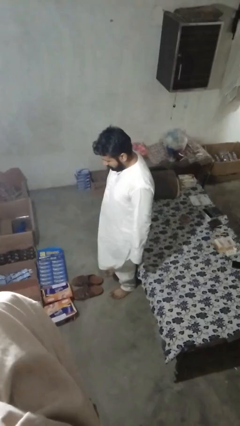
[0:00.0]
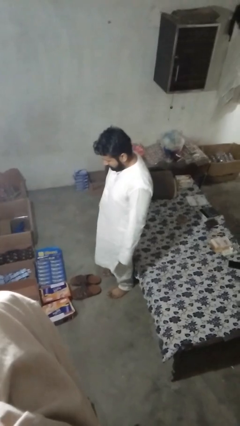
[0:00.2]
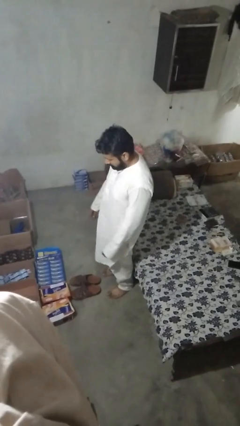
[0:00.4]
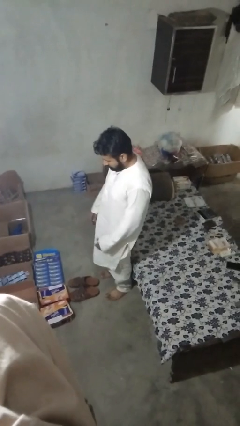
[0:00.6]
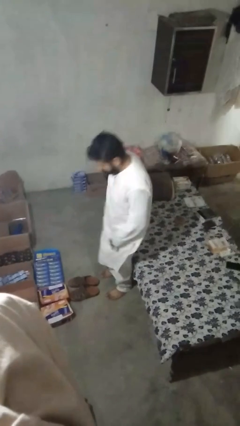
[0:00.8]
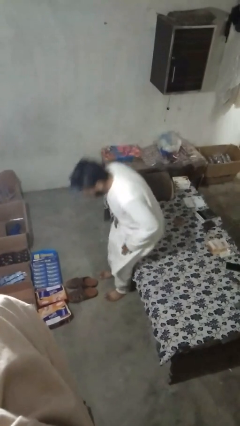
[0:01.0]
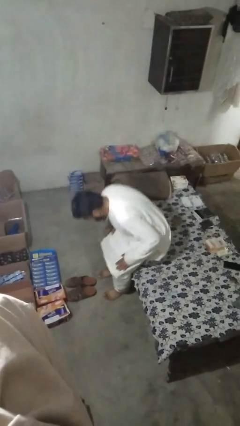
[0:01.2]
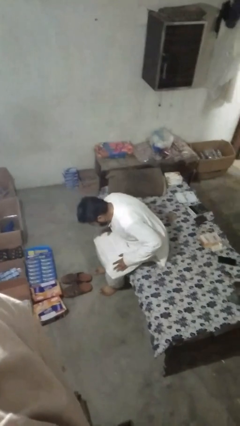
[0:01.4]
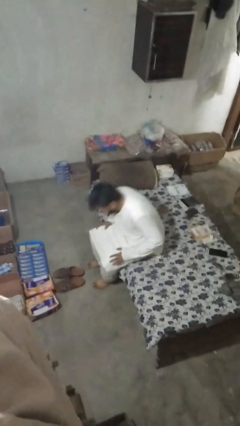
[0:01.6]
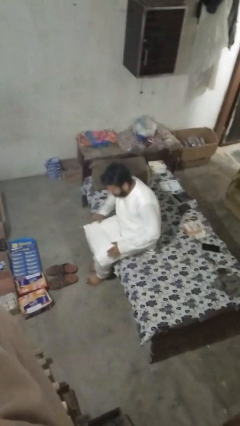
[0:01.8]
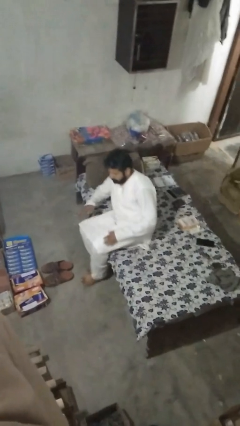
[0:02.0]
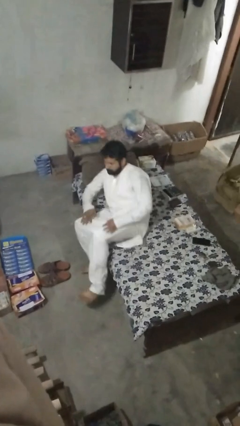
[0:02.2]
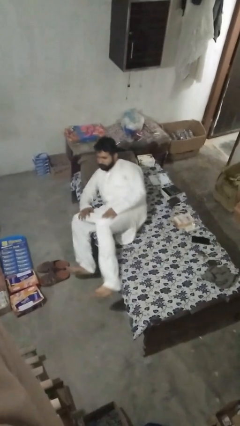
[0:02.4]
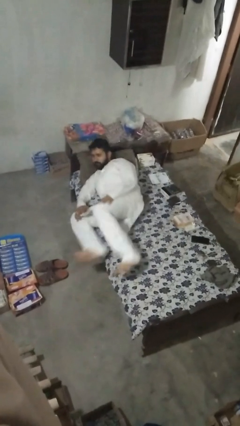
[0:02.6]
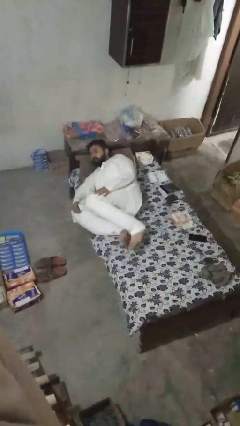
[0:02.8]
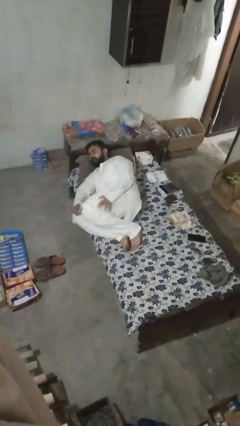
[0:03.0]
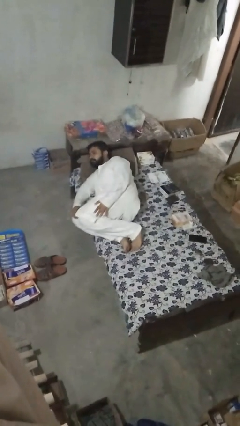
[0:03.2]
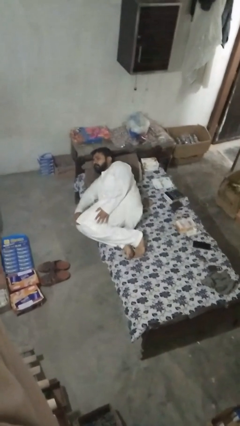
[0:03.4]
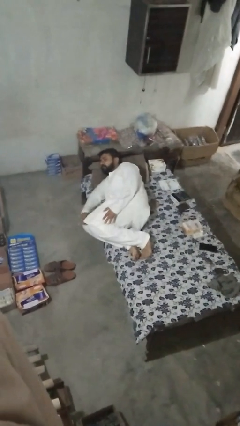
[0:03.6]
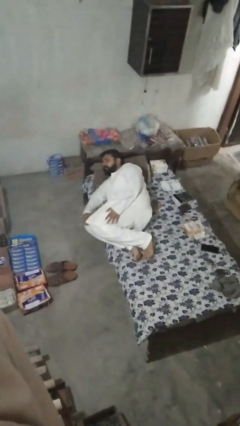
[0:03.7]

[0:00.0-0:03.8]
person lies down on bed

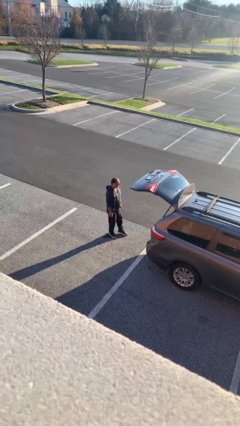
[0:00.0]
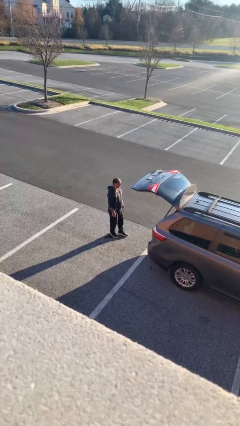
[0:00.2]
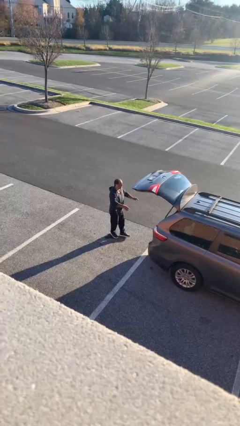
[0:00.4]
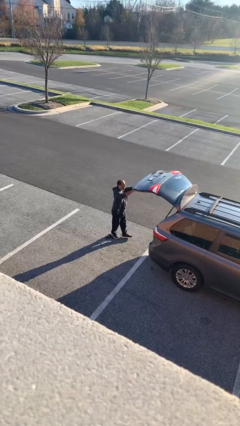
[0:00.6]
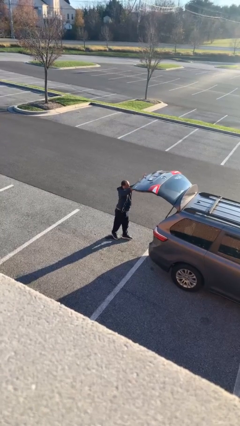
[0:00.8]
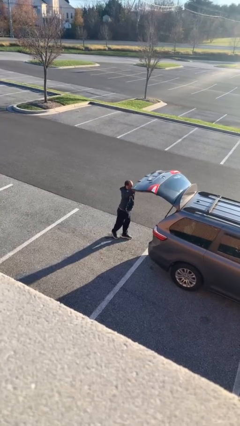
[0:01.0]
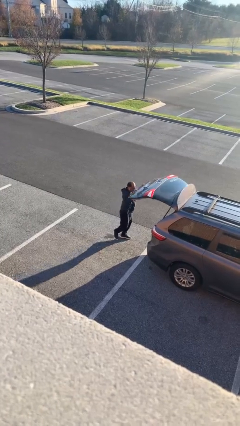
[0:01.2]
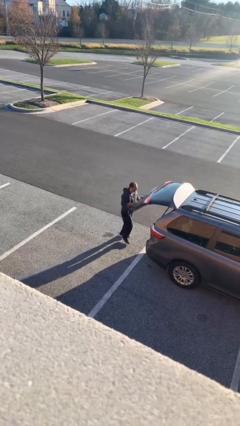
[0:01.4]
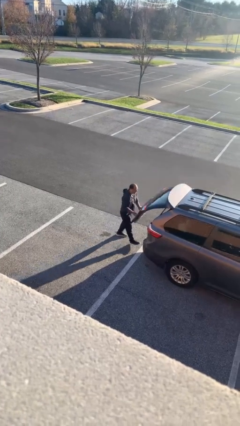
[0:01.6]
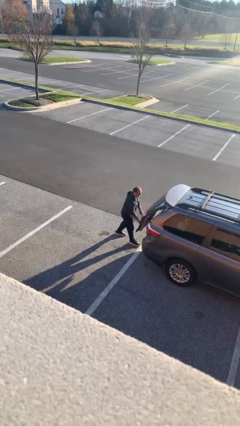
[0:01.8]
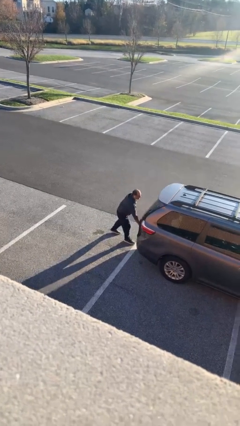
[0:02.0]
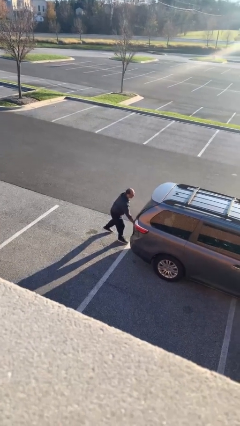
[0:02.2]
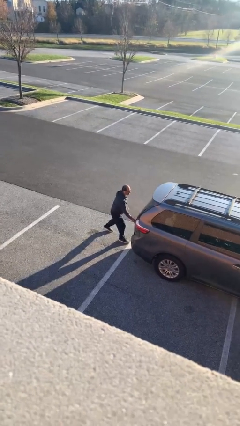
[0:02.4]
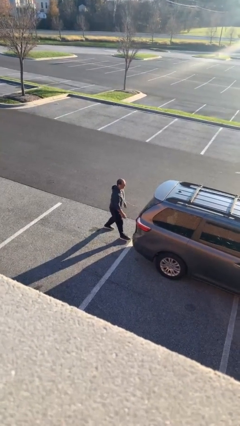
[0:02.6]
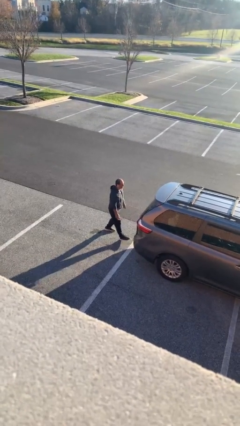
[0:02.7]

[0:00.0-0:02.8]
person closes car trunk

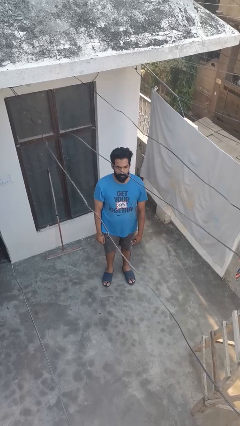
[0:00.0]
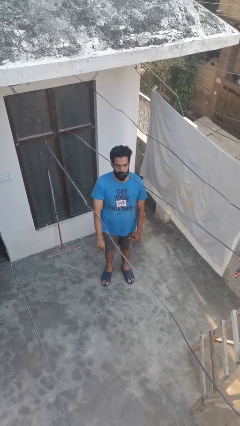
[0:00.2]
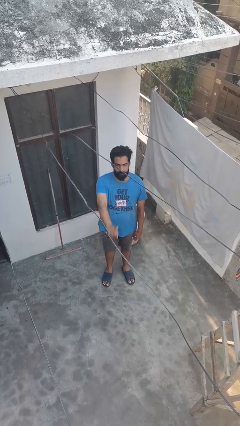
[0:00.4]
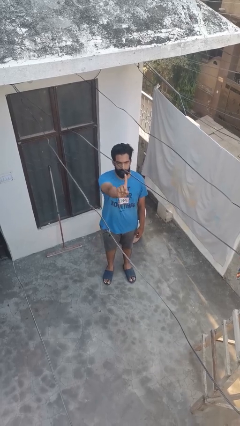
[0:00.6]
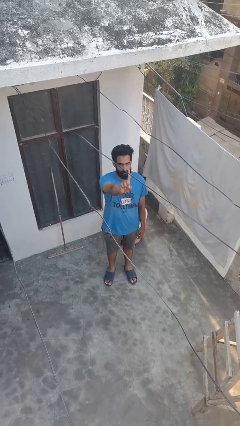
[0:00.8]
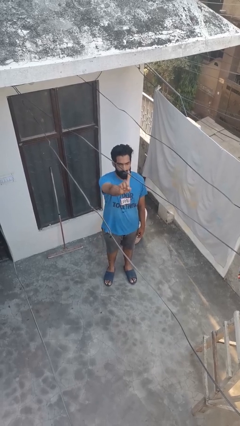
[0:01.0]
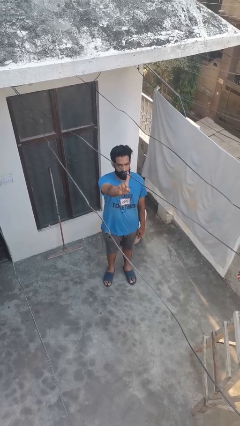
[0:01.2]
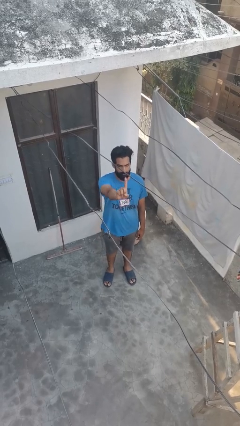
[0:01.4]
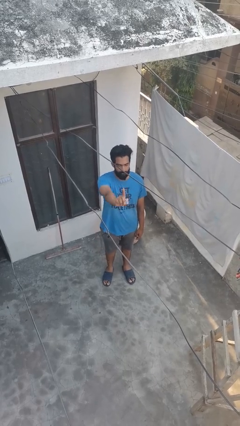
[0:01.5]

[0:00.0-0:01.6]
person gestures number one

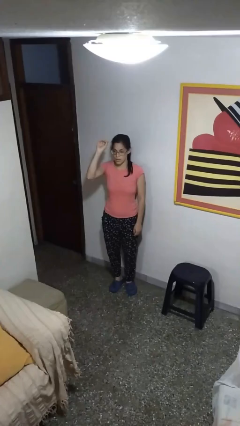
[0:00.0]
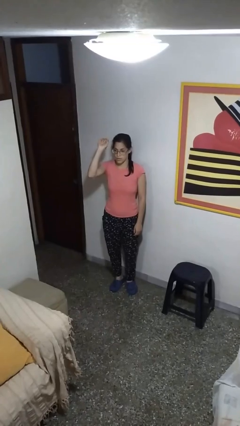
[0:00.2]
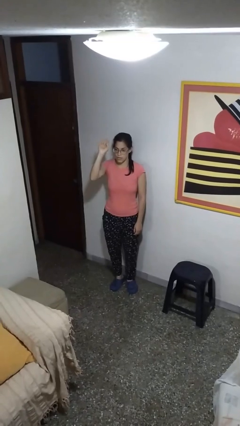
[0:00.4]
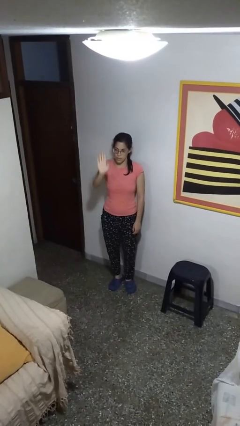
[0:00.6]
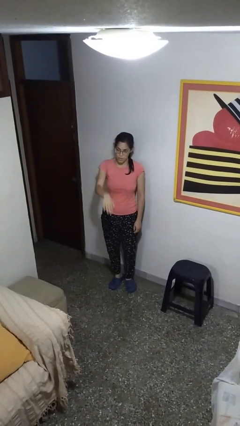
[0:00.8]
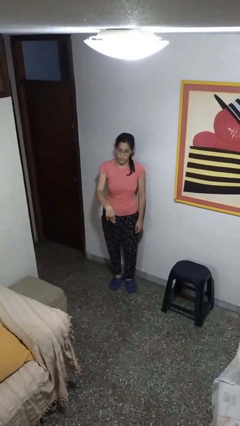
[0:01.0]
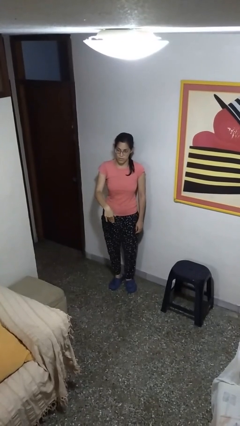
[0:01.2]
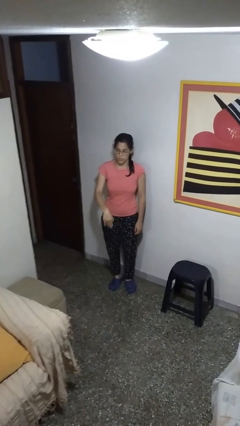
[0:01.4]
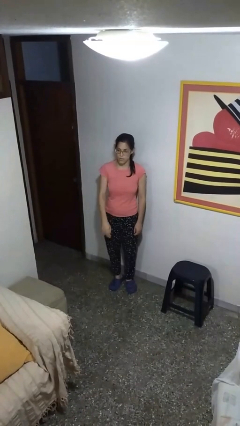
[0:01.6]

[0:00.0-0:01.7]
person gestures swipe down

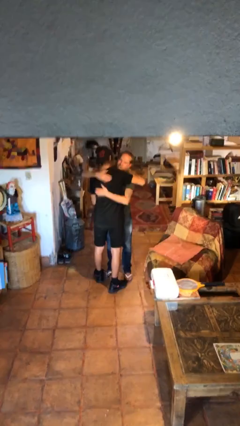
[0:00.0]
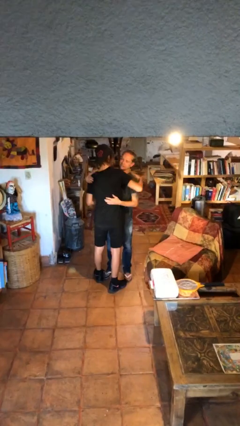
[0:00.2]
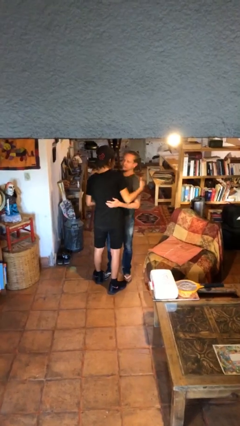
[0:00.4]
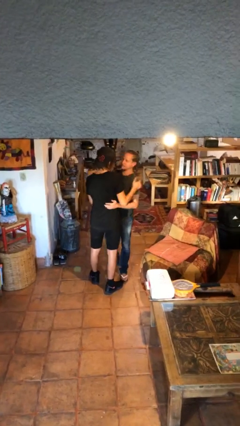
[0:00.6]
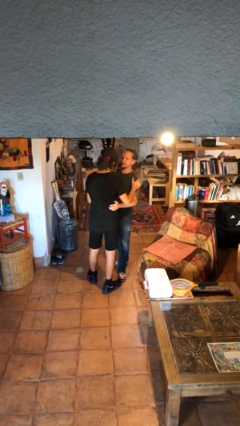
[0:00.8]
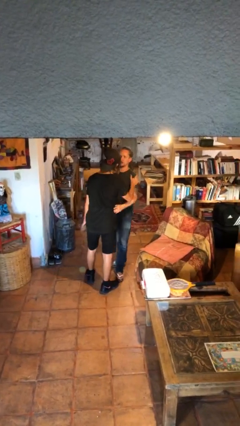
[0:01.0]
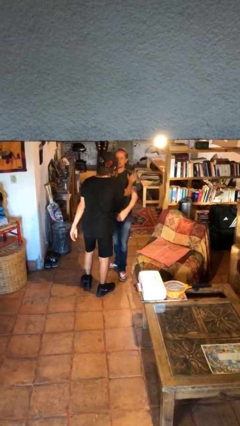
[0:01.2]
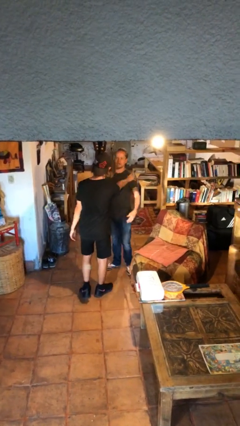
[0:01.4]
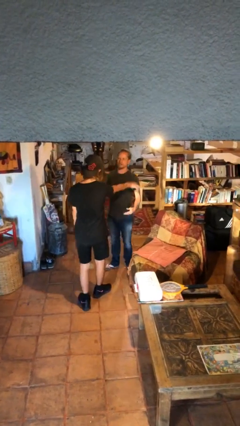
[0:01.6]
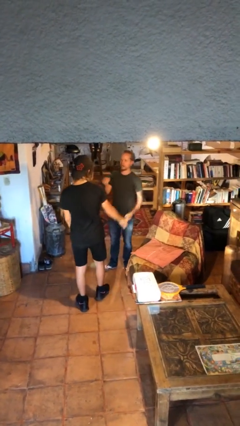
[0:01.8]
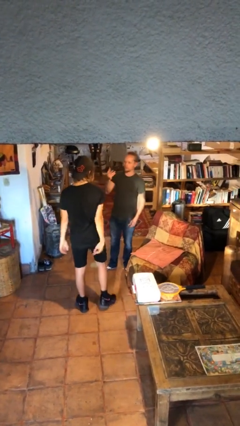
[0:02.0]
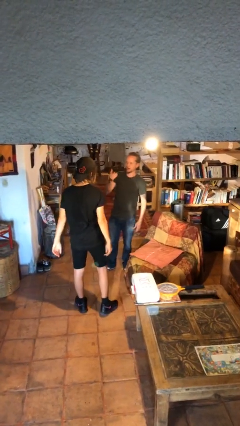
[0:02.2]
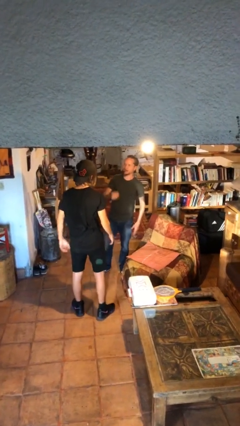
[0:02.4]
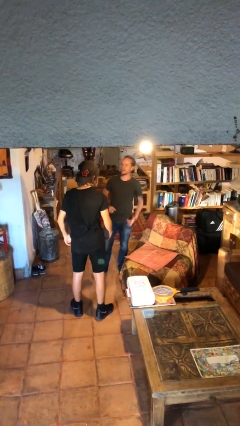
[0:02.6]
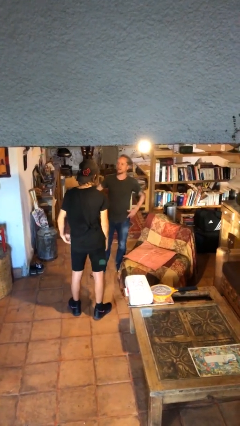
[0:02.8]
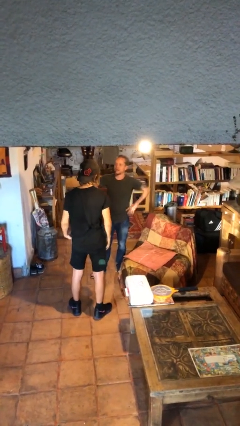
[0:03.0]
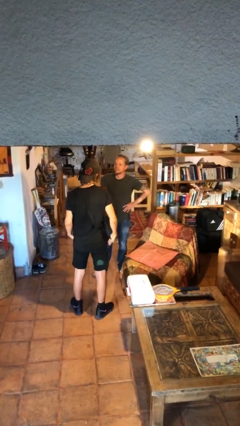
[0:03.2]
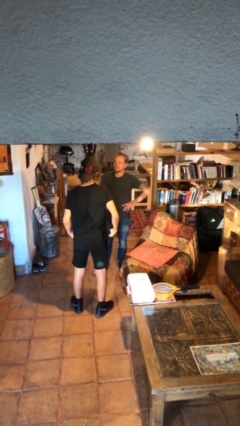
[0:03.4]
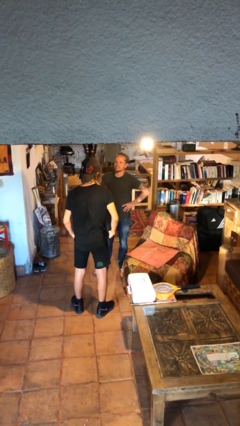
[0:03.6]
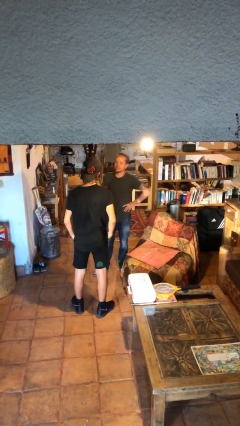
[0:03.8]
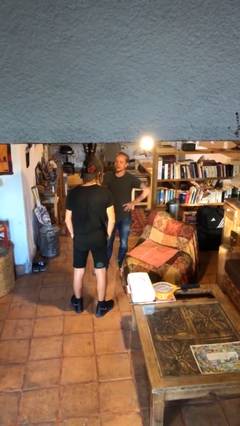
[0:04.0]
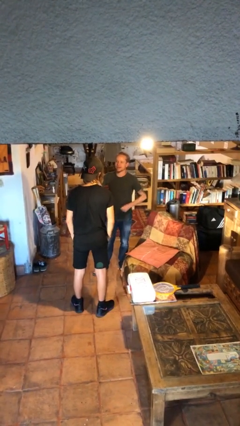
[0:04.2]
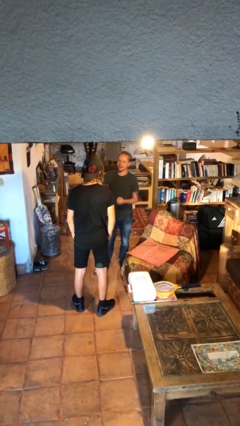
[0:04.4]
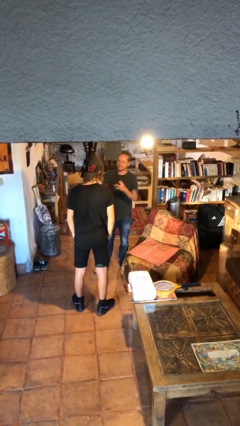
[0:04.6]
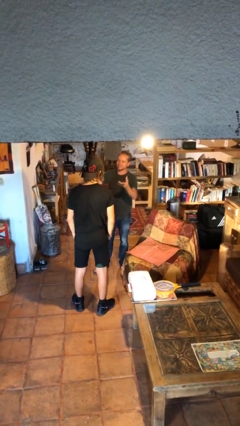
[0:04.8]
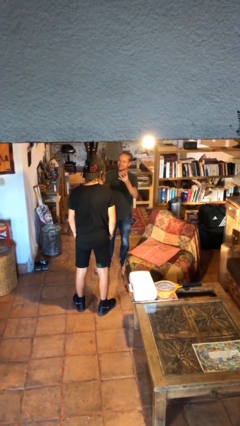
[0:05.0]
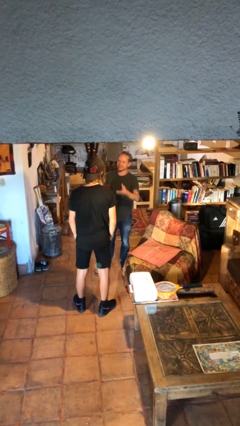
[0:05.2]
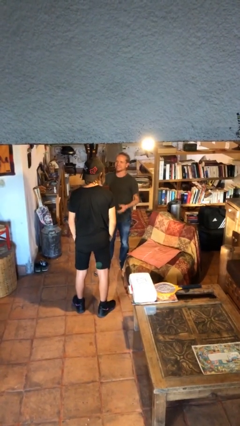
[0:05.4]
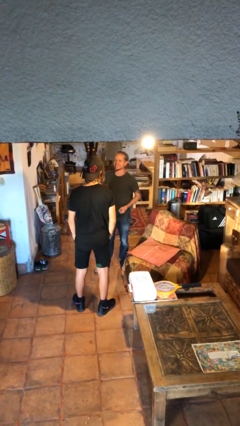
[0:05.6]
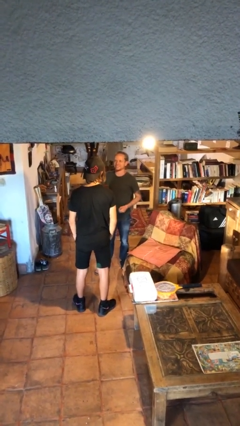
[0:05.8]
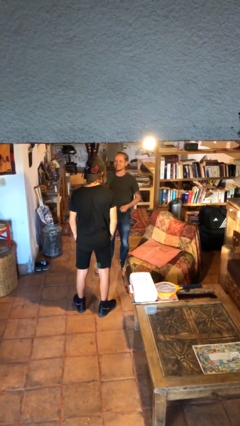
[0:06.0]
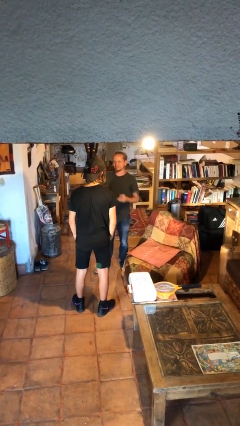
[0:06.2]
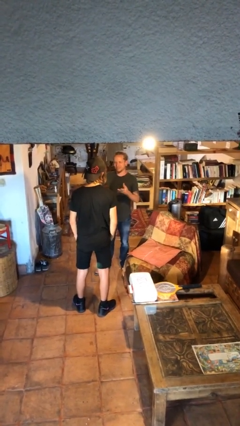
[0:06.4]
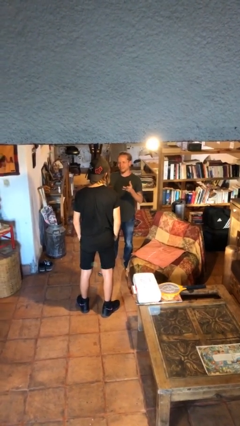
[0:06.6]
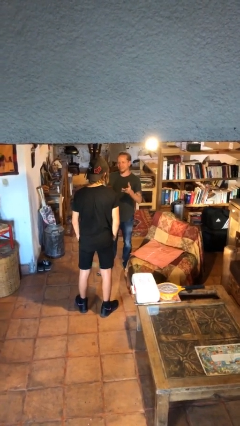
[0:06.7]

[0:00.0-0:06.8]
person talks to person

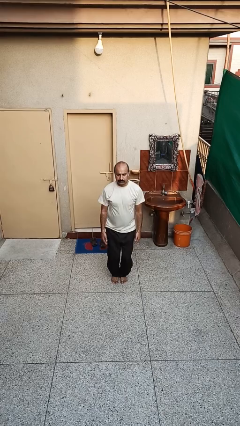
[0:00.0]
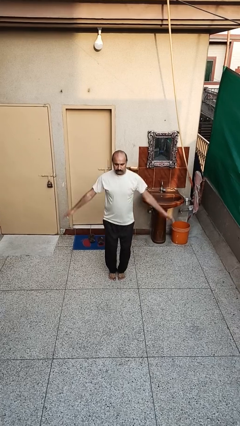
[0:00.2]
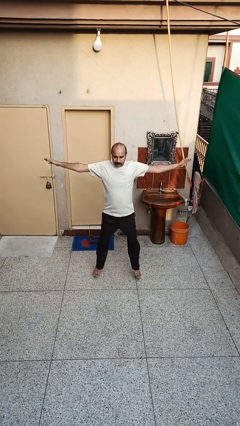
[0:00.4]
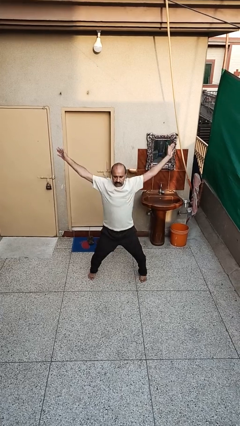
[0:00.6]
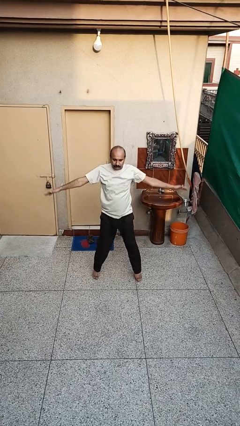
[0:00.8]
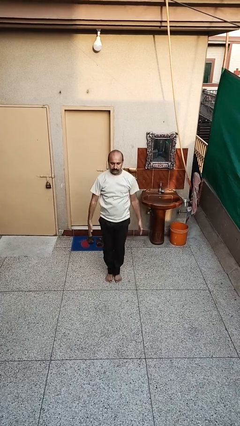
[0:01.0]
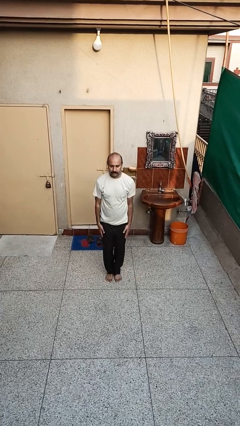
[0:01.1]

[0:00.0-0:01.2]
person exercises with jumping jacks
